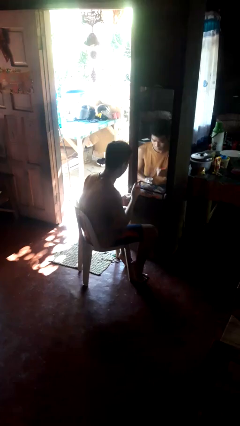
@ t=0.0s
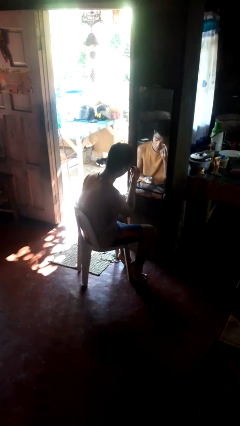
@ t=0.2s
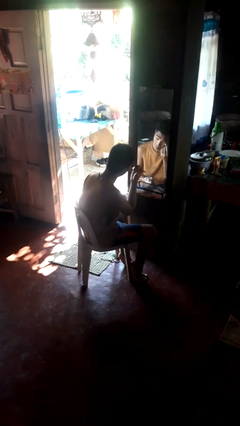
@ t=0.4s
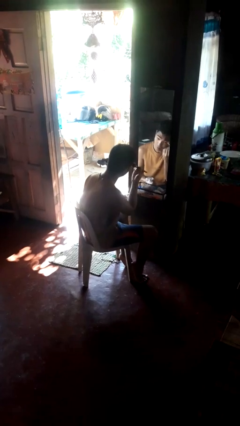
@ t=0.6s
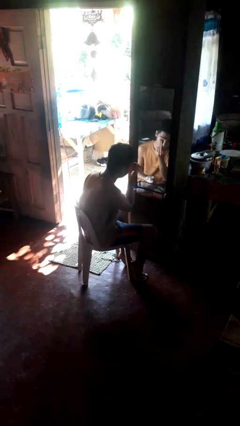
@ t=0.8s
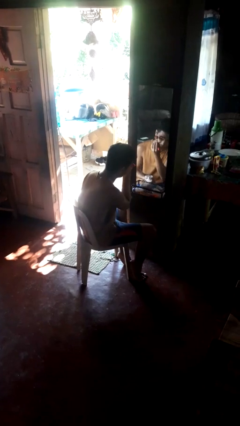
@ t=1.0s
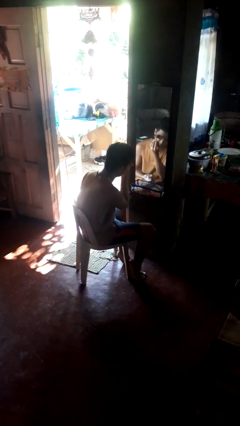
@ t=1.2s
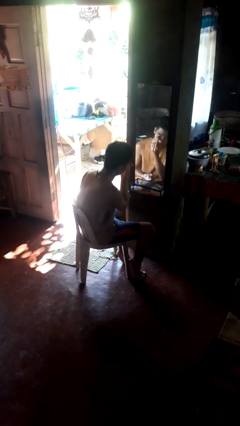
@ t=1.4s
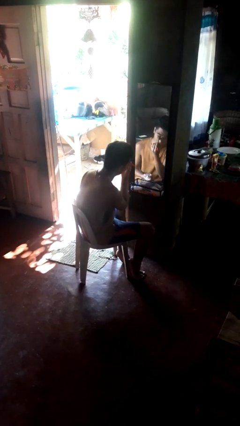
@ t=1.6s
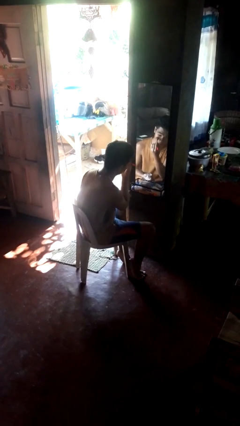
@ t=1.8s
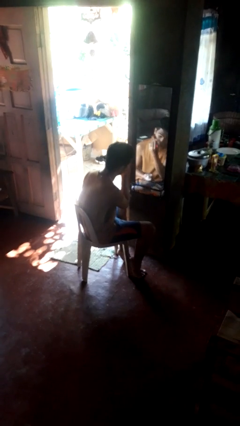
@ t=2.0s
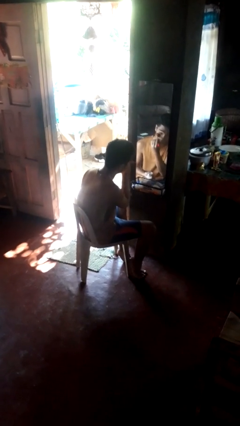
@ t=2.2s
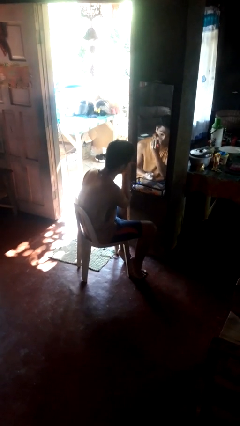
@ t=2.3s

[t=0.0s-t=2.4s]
person applies eye makeup

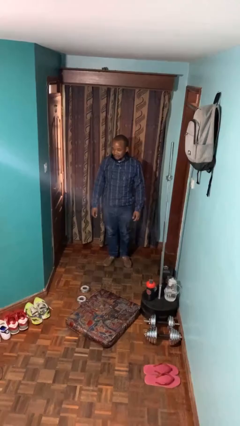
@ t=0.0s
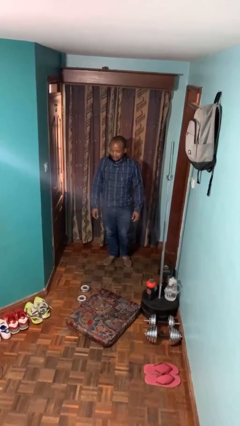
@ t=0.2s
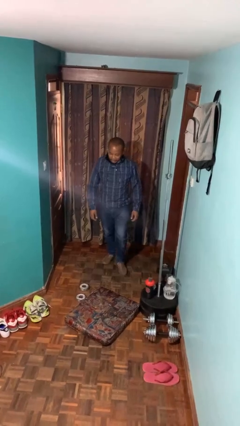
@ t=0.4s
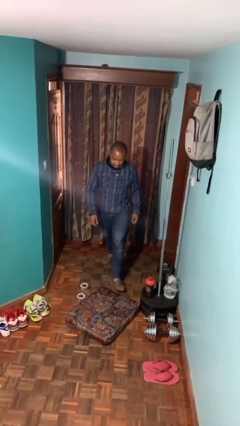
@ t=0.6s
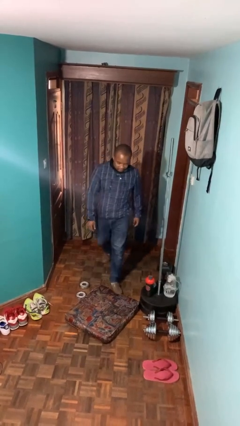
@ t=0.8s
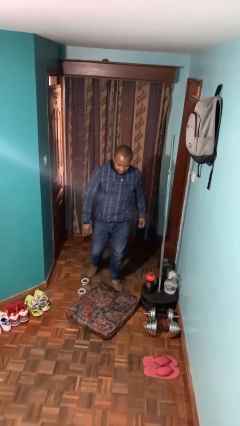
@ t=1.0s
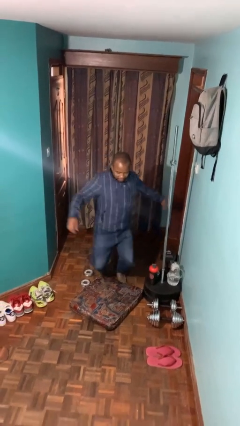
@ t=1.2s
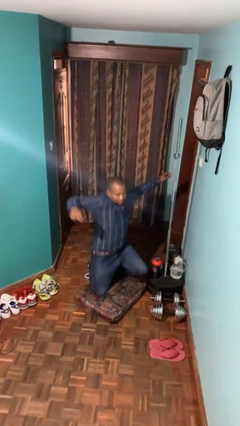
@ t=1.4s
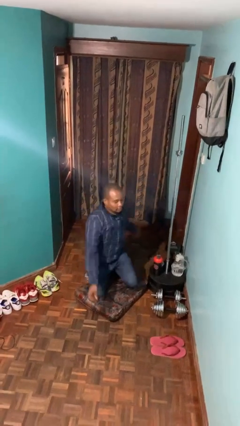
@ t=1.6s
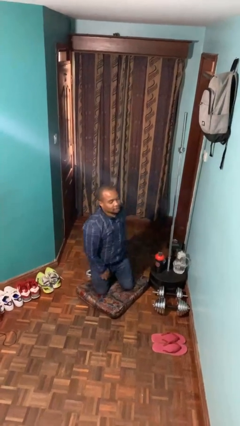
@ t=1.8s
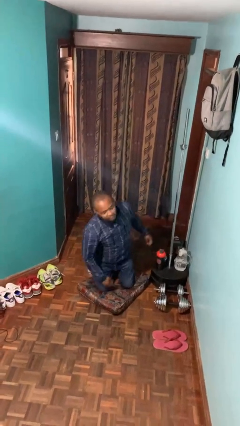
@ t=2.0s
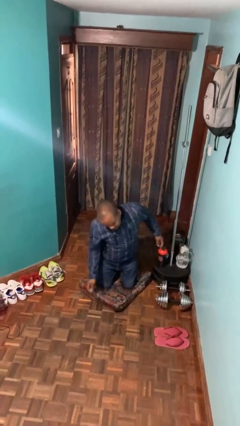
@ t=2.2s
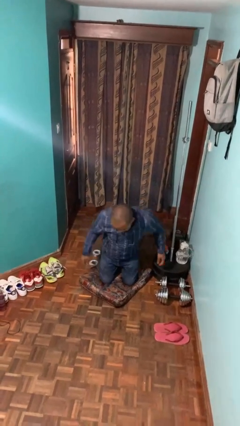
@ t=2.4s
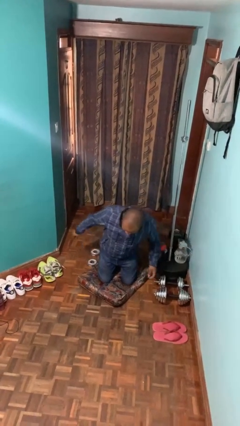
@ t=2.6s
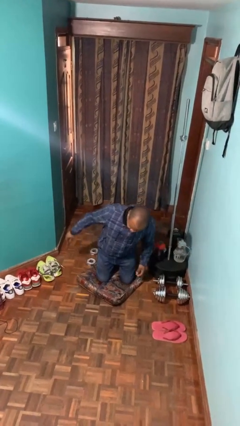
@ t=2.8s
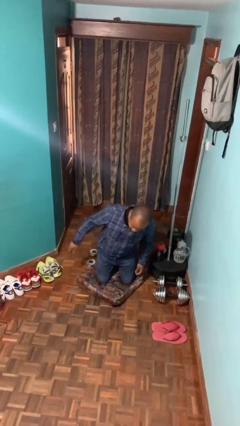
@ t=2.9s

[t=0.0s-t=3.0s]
person trips on object on floor

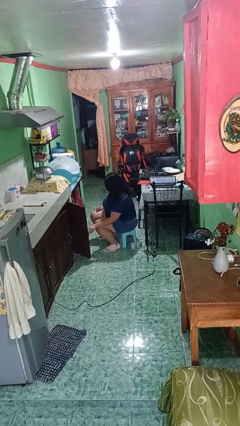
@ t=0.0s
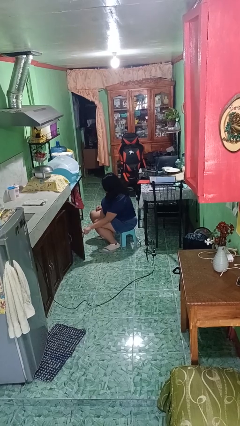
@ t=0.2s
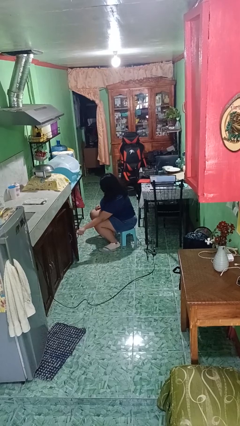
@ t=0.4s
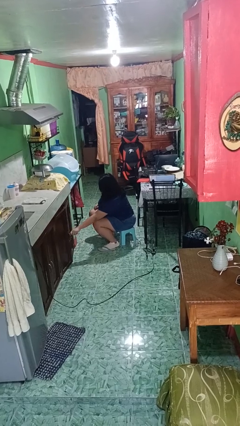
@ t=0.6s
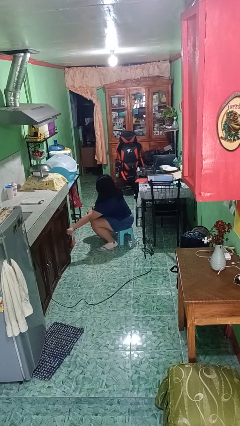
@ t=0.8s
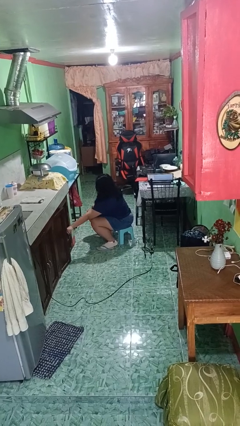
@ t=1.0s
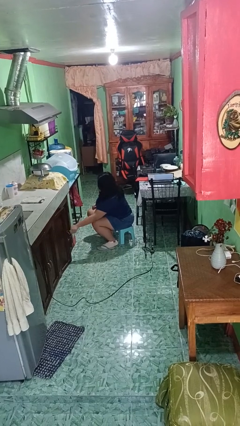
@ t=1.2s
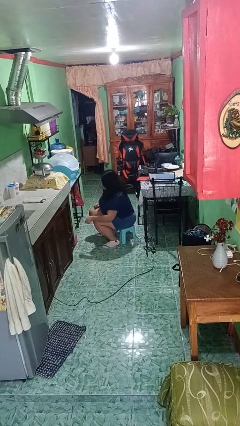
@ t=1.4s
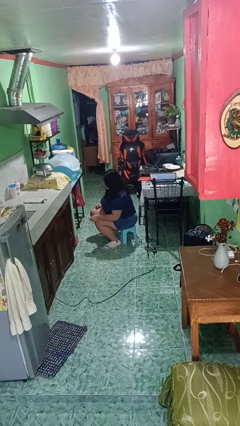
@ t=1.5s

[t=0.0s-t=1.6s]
person closes cabinet

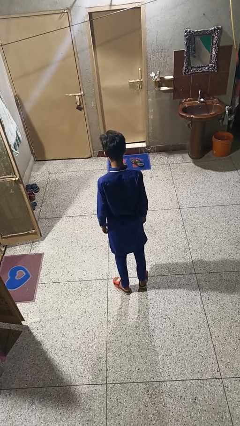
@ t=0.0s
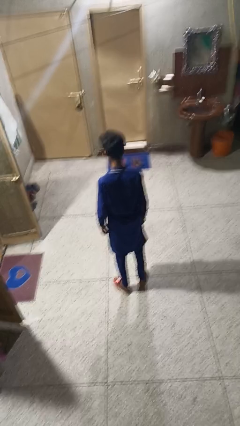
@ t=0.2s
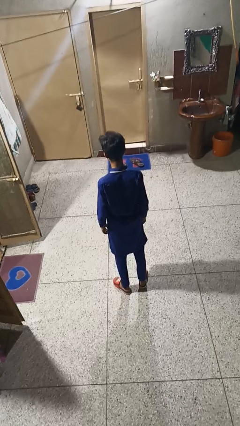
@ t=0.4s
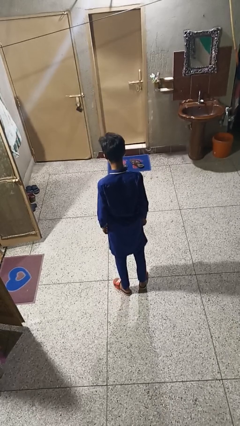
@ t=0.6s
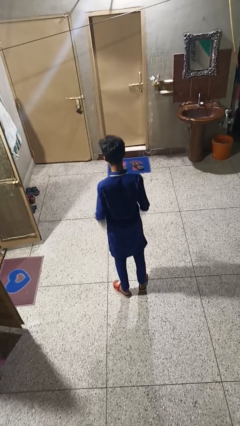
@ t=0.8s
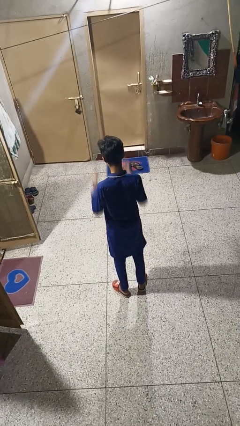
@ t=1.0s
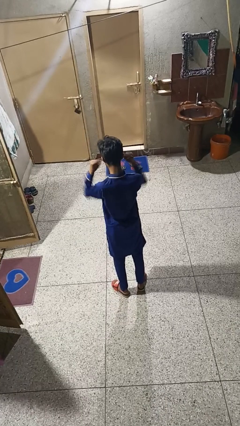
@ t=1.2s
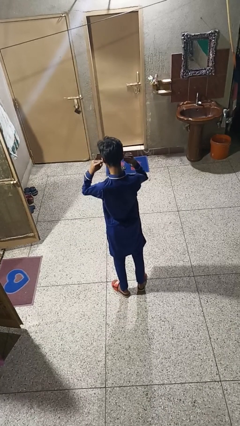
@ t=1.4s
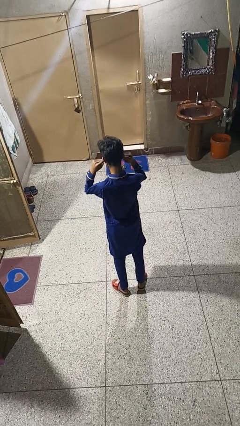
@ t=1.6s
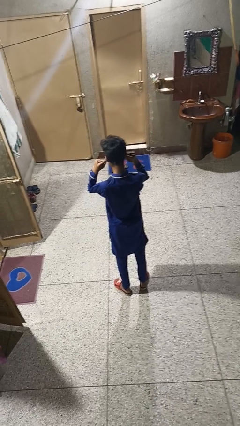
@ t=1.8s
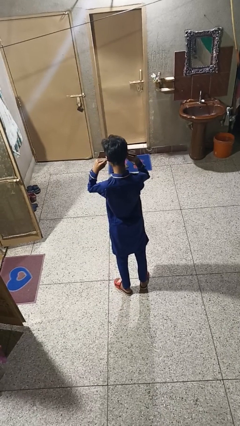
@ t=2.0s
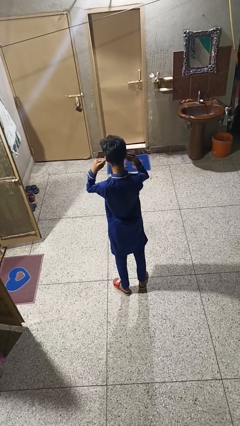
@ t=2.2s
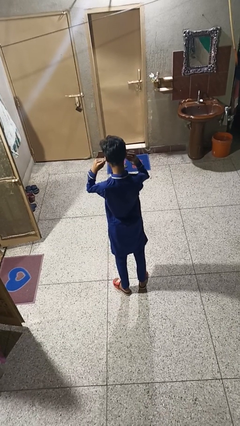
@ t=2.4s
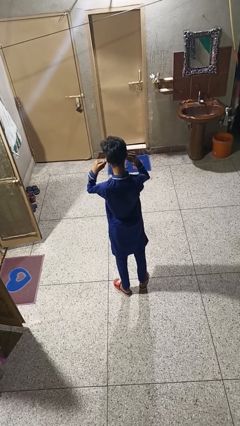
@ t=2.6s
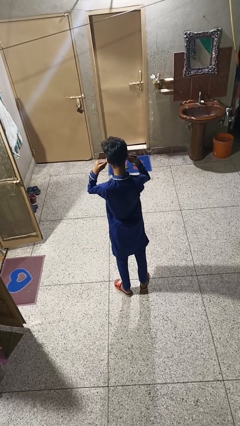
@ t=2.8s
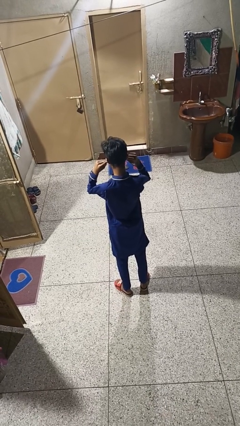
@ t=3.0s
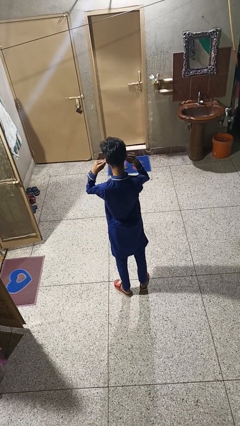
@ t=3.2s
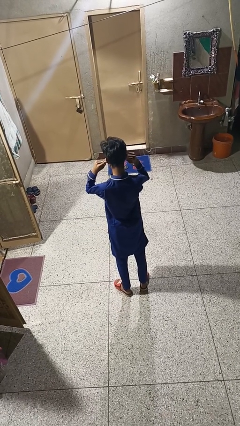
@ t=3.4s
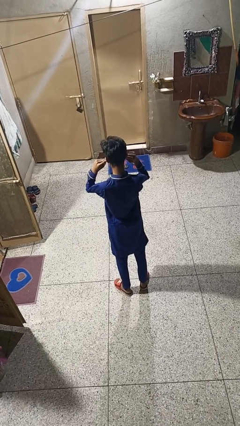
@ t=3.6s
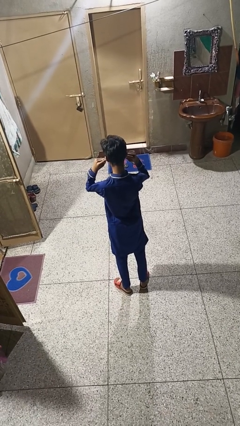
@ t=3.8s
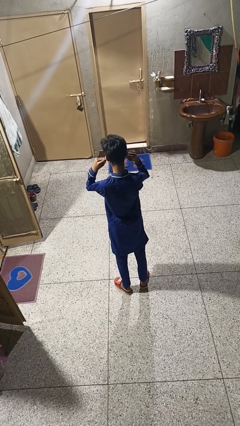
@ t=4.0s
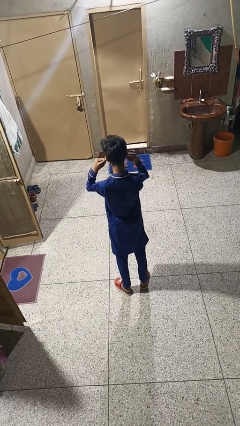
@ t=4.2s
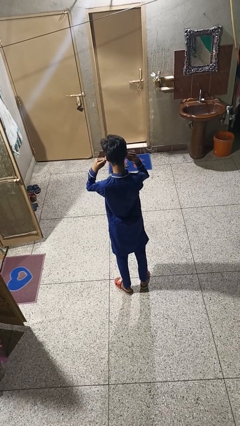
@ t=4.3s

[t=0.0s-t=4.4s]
person puts fingers in ear

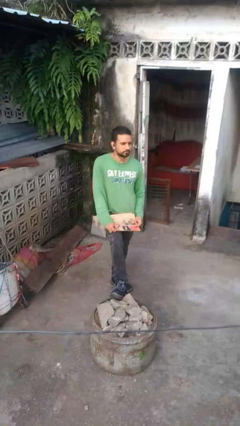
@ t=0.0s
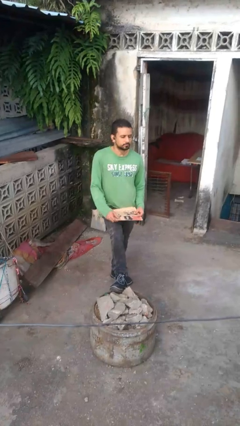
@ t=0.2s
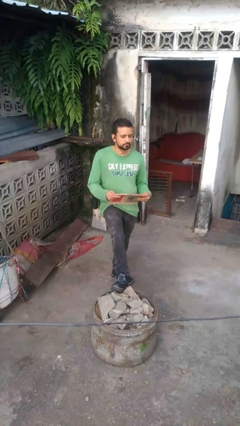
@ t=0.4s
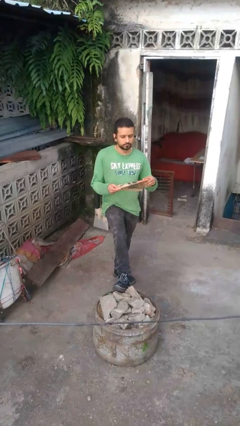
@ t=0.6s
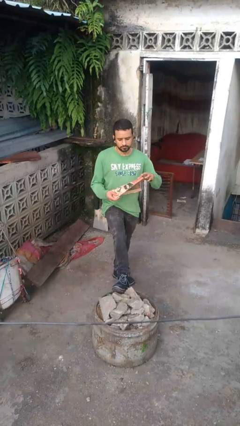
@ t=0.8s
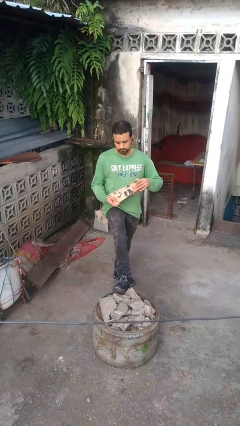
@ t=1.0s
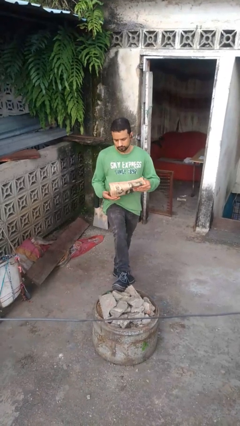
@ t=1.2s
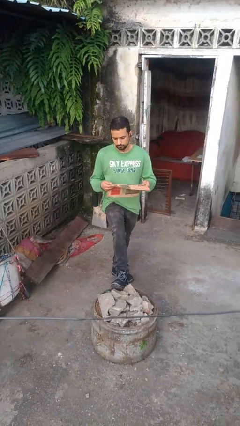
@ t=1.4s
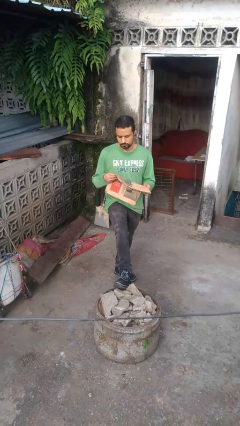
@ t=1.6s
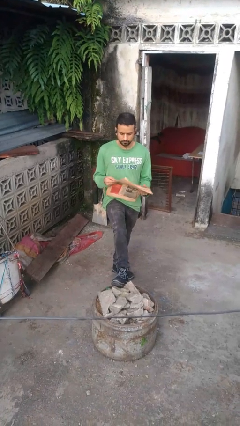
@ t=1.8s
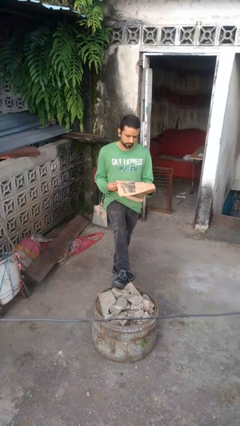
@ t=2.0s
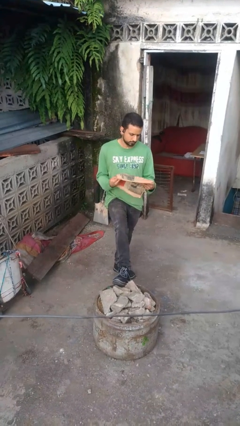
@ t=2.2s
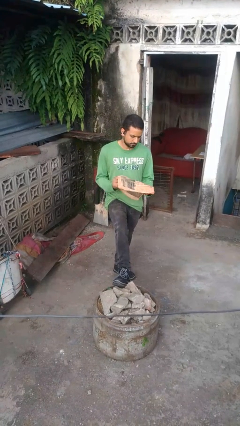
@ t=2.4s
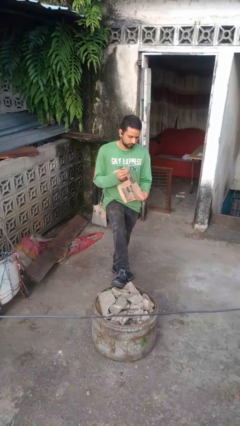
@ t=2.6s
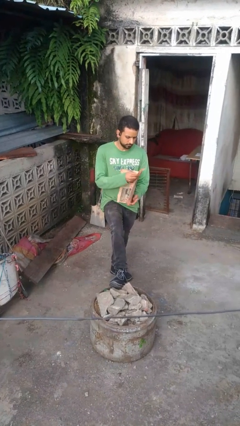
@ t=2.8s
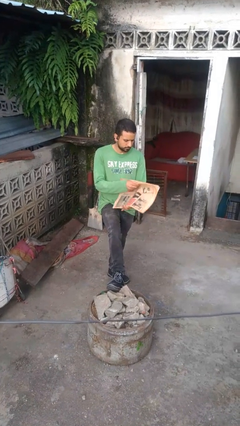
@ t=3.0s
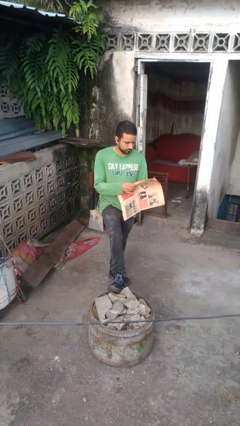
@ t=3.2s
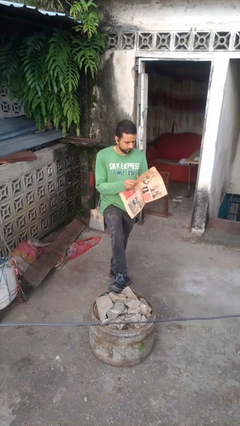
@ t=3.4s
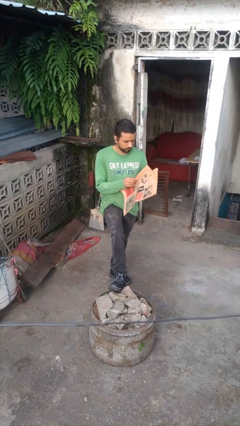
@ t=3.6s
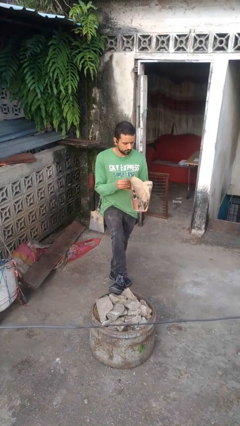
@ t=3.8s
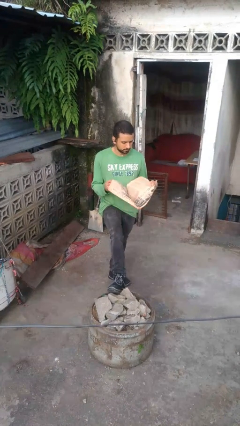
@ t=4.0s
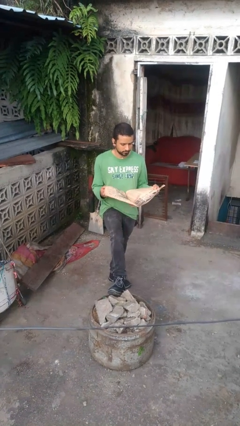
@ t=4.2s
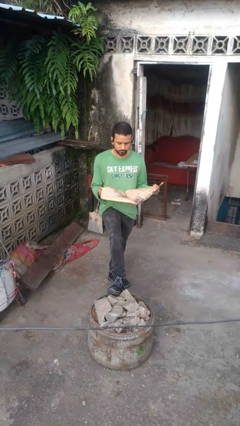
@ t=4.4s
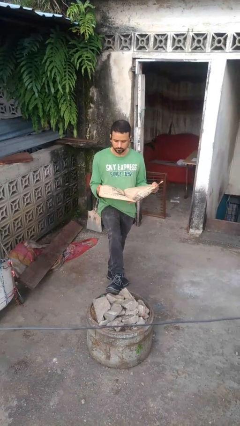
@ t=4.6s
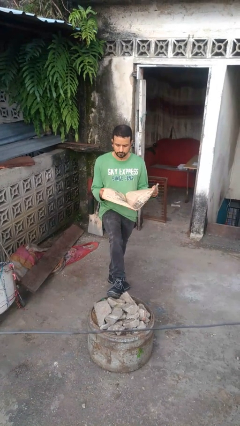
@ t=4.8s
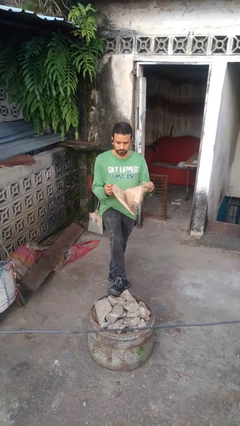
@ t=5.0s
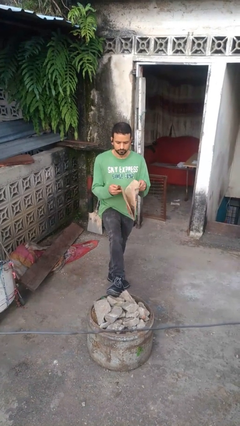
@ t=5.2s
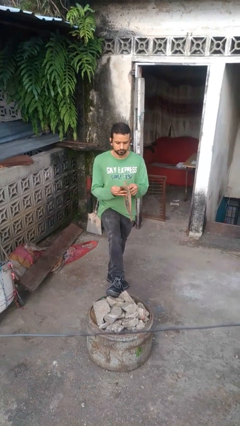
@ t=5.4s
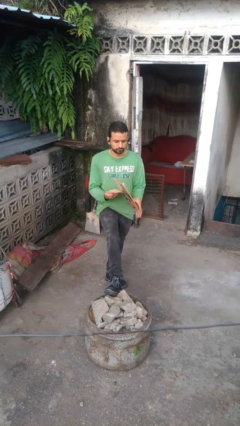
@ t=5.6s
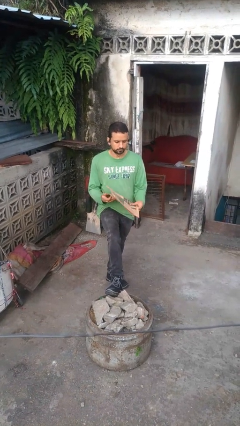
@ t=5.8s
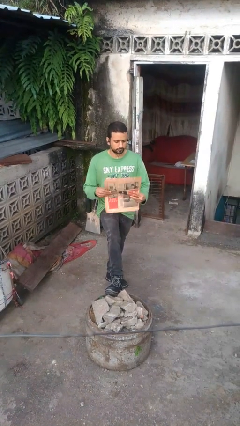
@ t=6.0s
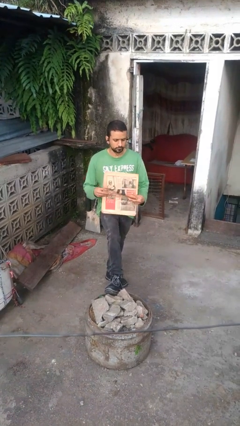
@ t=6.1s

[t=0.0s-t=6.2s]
person reads newspaper
